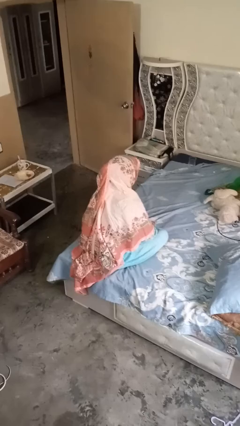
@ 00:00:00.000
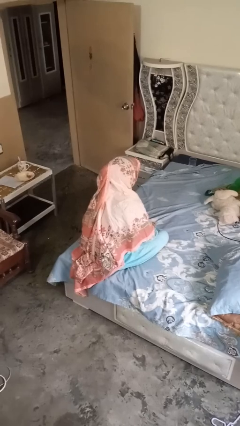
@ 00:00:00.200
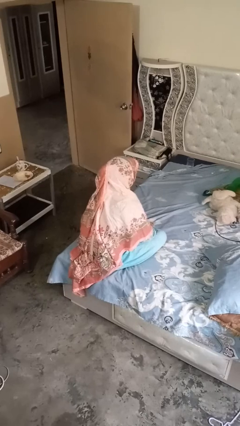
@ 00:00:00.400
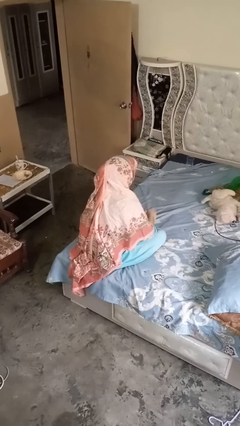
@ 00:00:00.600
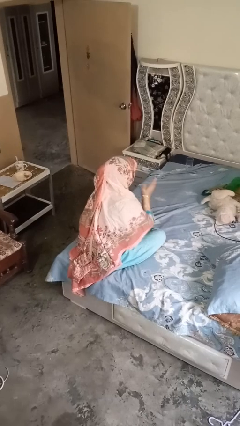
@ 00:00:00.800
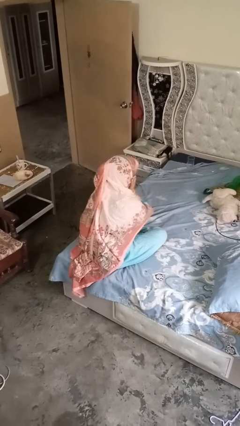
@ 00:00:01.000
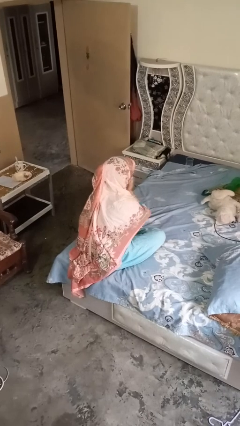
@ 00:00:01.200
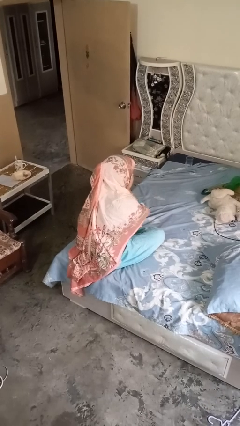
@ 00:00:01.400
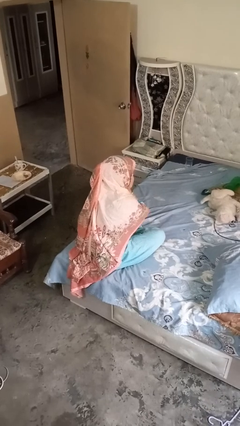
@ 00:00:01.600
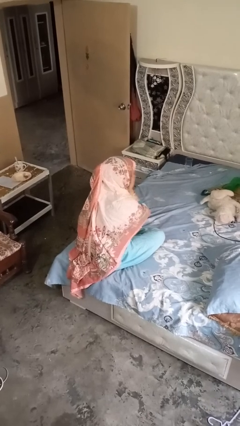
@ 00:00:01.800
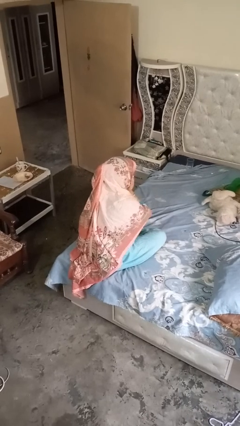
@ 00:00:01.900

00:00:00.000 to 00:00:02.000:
person strokes chin

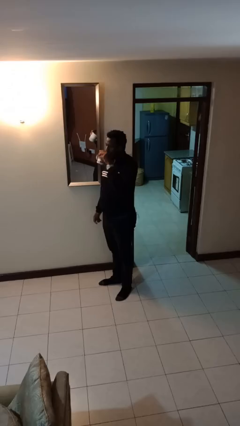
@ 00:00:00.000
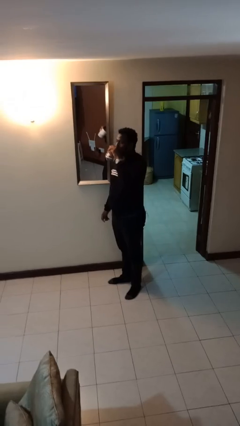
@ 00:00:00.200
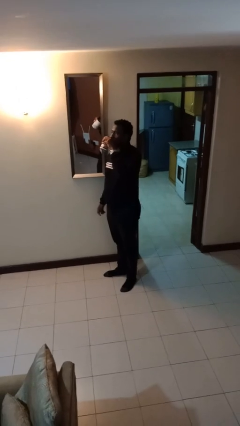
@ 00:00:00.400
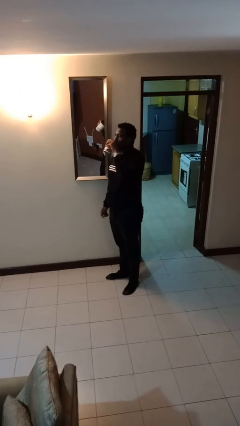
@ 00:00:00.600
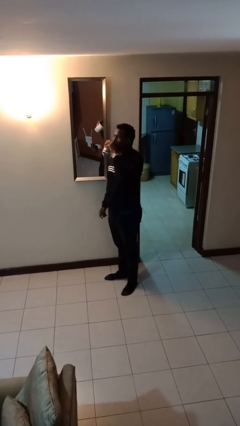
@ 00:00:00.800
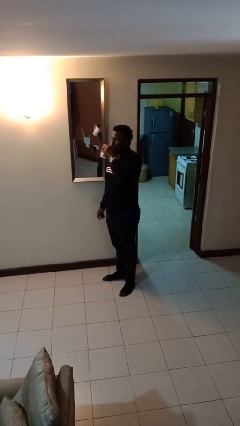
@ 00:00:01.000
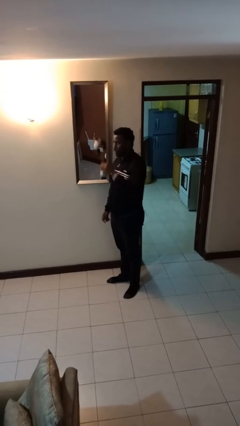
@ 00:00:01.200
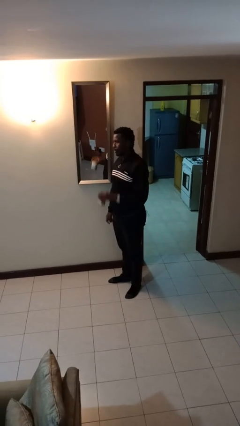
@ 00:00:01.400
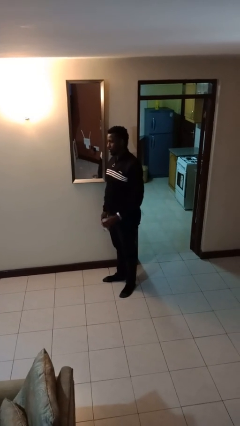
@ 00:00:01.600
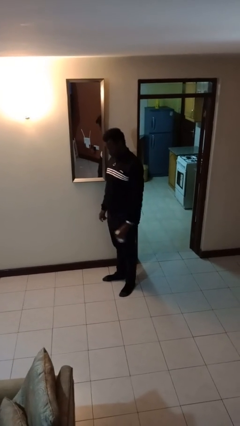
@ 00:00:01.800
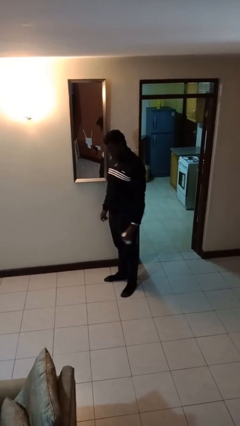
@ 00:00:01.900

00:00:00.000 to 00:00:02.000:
person drinks from beverage can

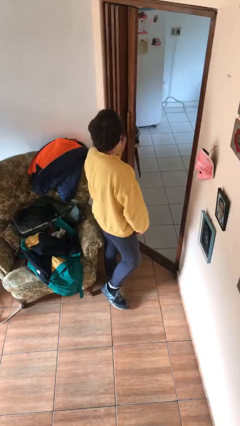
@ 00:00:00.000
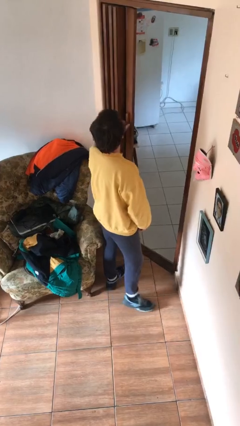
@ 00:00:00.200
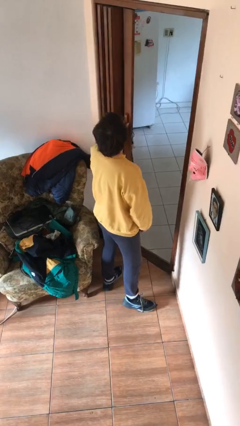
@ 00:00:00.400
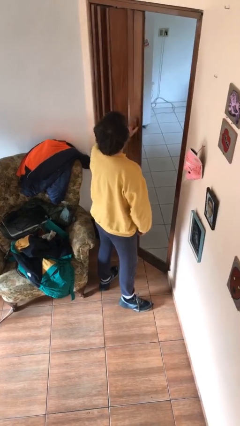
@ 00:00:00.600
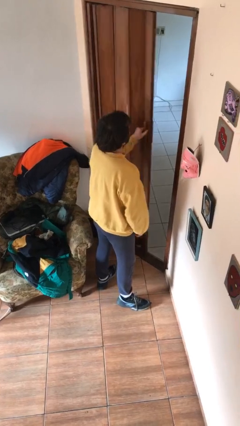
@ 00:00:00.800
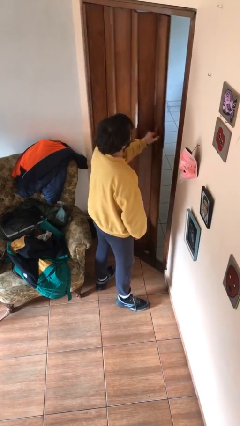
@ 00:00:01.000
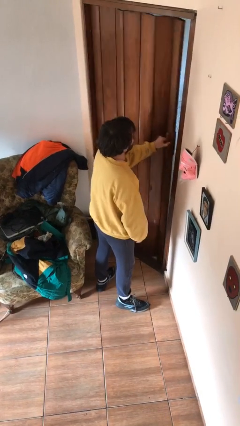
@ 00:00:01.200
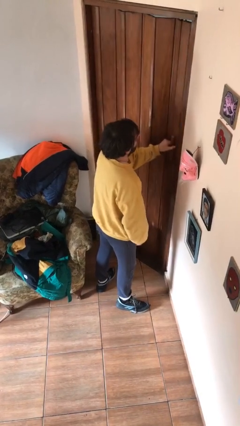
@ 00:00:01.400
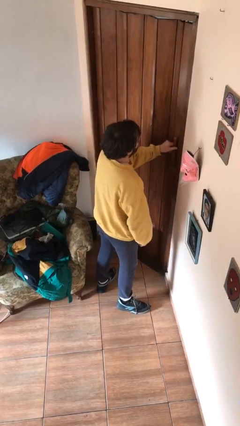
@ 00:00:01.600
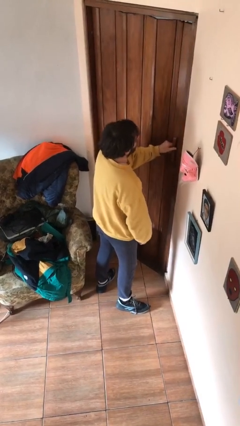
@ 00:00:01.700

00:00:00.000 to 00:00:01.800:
person closes sliding door

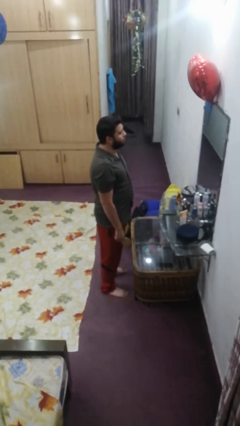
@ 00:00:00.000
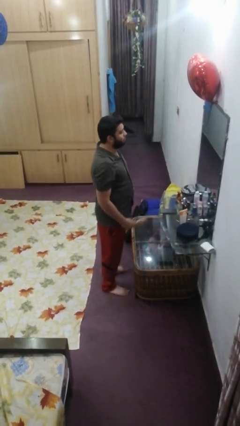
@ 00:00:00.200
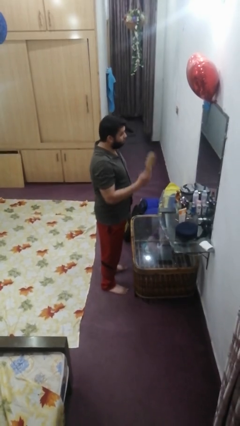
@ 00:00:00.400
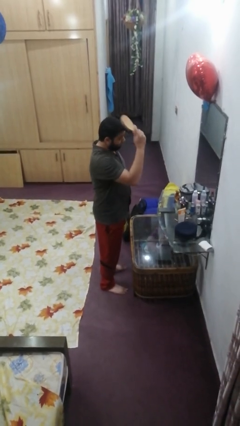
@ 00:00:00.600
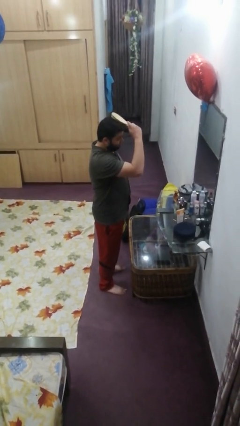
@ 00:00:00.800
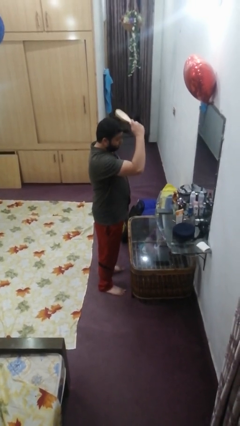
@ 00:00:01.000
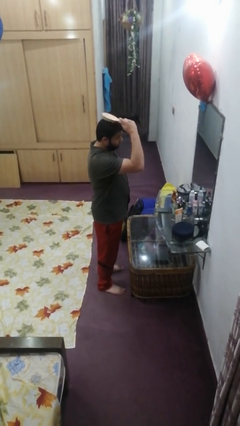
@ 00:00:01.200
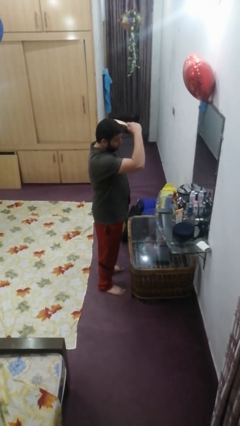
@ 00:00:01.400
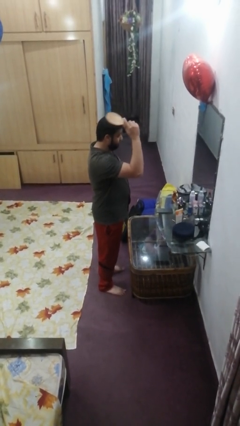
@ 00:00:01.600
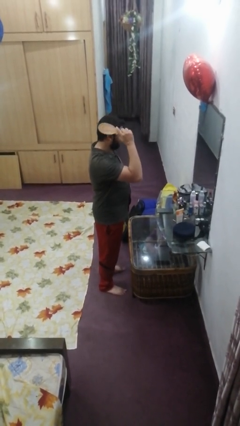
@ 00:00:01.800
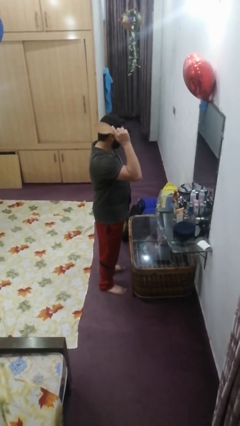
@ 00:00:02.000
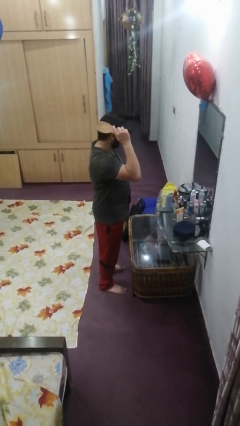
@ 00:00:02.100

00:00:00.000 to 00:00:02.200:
person brushes hair

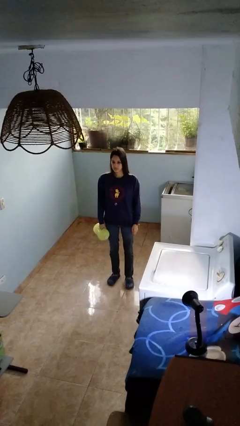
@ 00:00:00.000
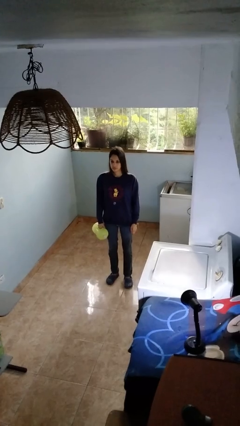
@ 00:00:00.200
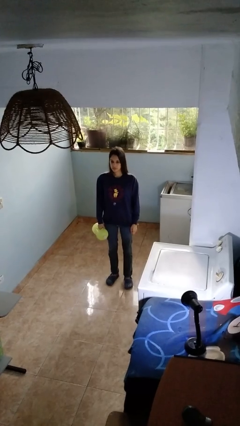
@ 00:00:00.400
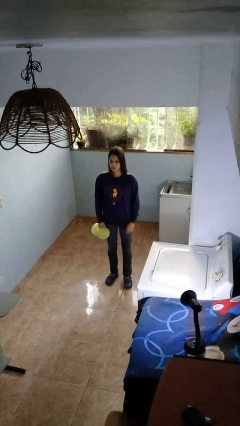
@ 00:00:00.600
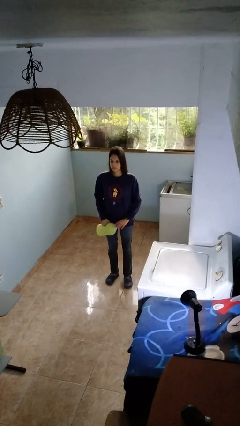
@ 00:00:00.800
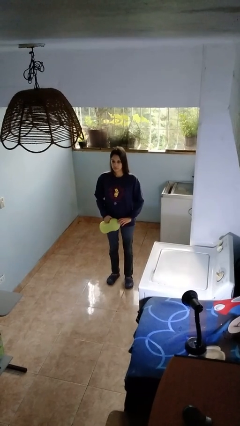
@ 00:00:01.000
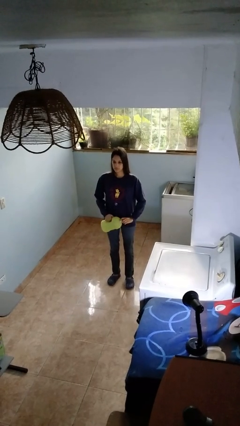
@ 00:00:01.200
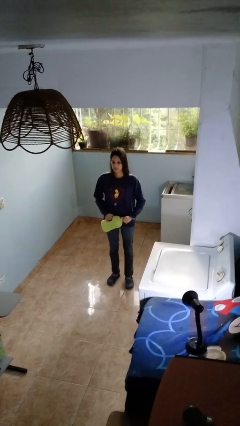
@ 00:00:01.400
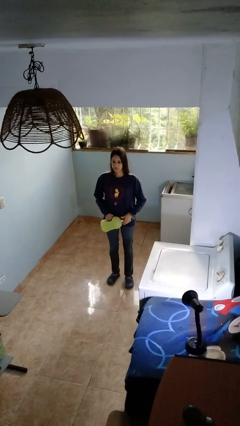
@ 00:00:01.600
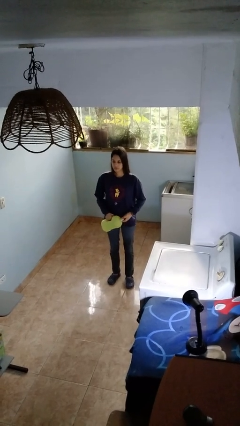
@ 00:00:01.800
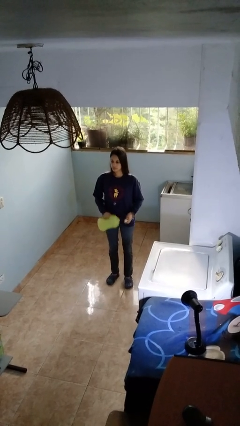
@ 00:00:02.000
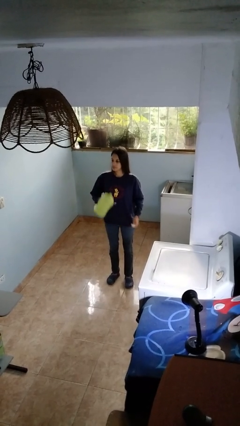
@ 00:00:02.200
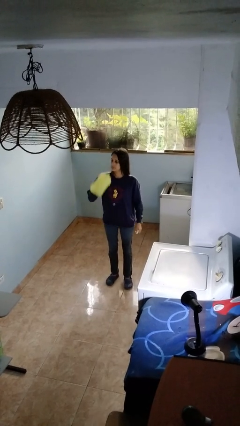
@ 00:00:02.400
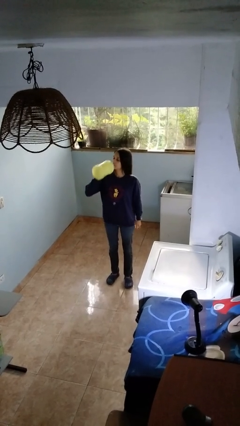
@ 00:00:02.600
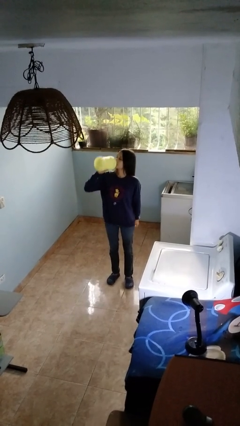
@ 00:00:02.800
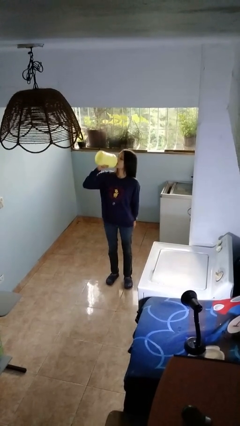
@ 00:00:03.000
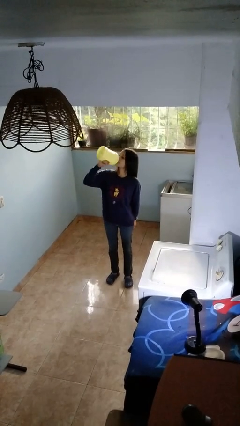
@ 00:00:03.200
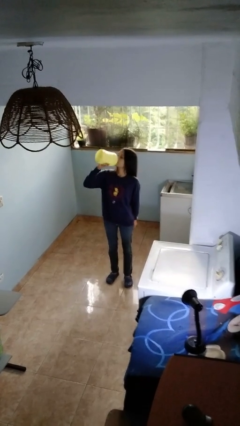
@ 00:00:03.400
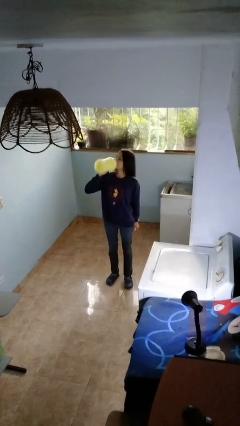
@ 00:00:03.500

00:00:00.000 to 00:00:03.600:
person drinks from bottle

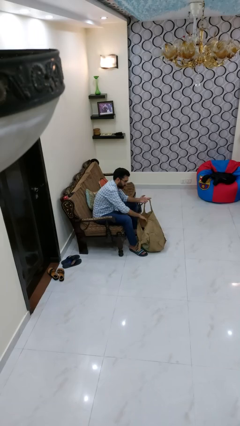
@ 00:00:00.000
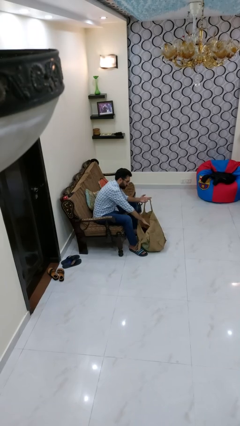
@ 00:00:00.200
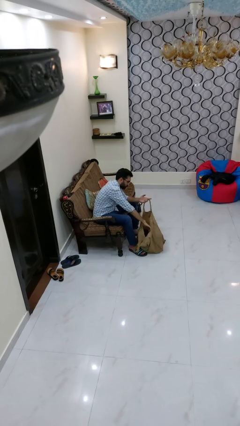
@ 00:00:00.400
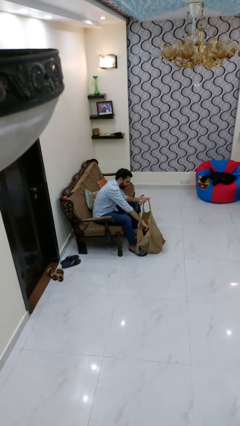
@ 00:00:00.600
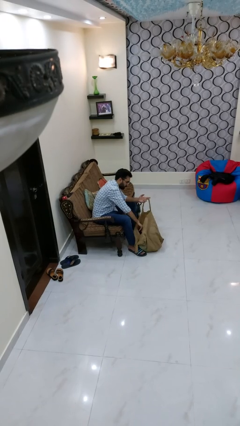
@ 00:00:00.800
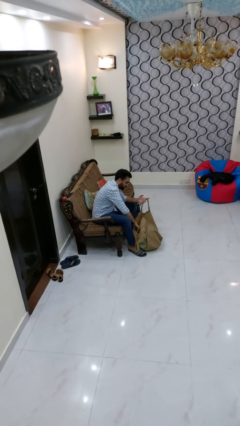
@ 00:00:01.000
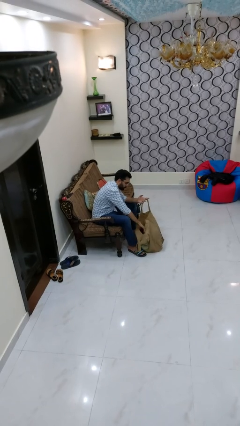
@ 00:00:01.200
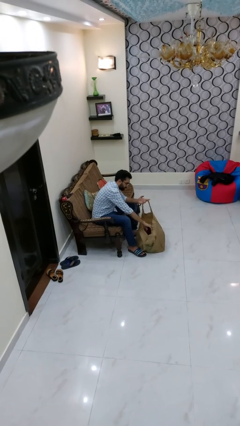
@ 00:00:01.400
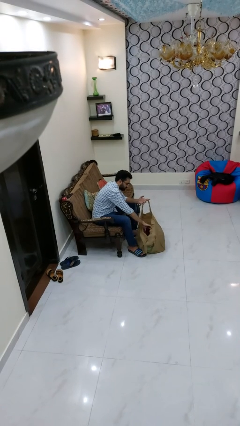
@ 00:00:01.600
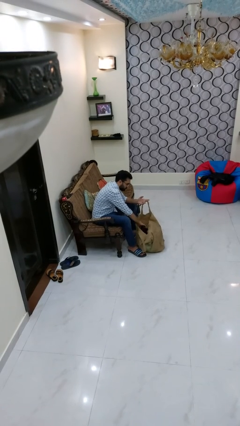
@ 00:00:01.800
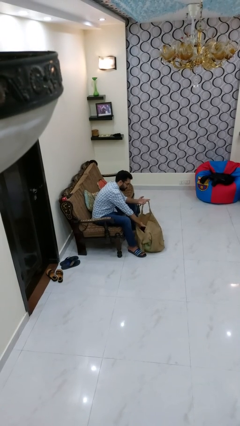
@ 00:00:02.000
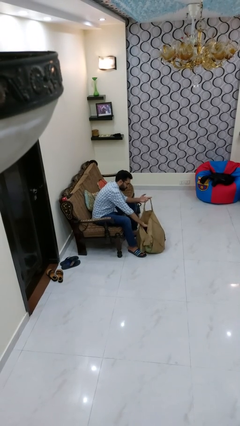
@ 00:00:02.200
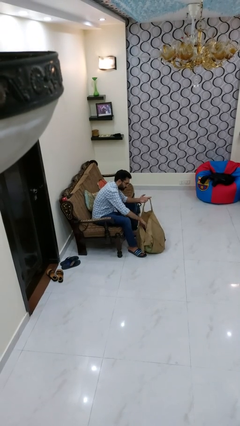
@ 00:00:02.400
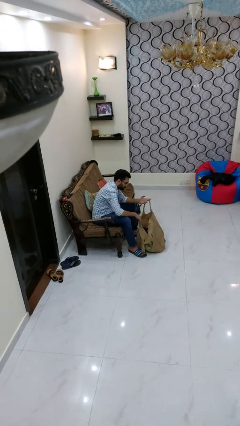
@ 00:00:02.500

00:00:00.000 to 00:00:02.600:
person searches in bag

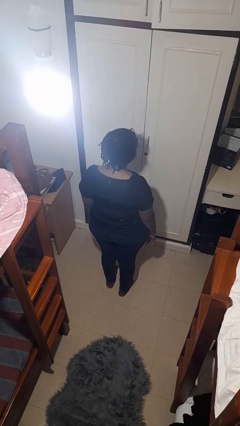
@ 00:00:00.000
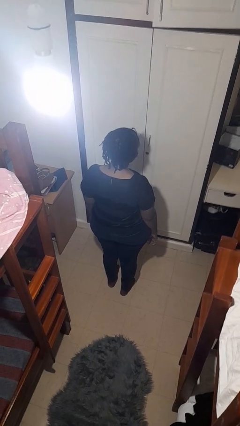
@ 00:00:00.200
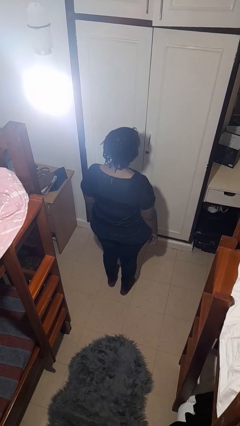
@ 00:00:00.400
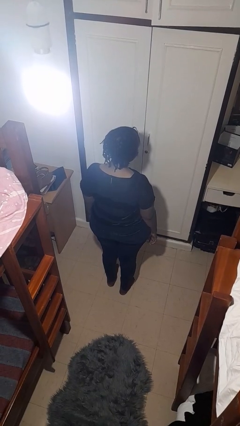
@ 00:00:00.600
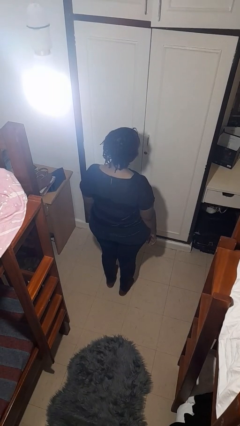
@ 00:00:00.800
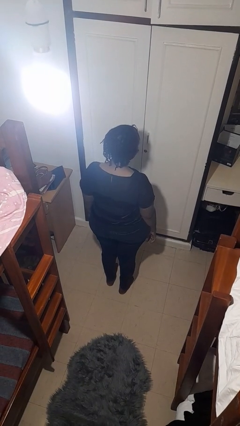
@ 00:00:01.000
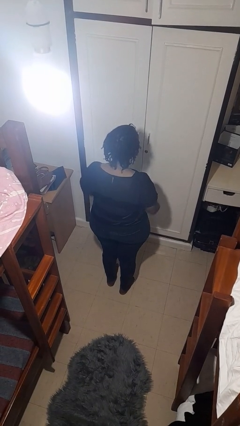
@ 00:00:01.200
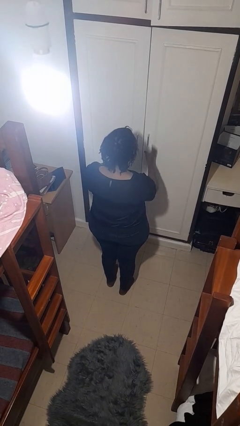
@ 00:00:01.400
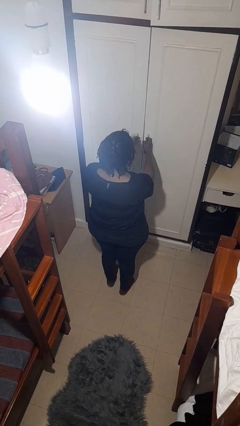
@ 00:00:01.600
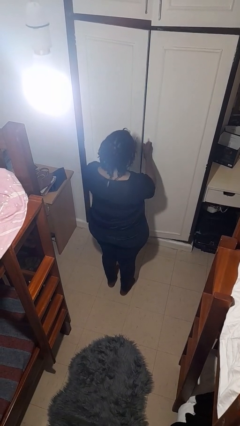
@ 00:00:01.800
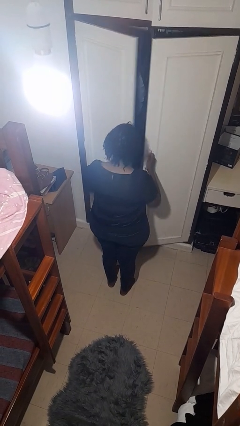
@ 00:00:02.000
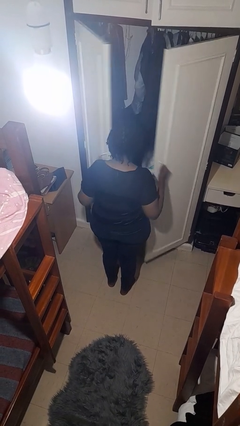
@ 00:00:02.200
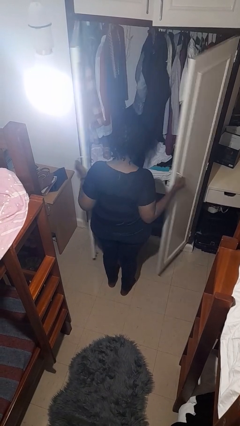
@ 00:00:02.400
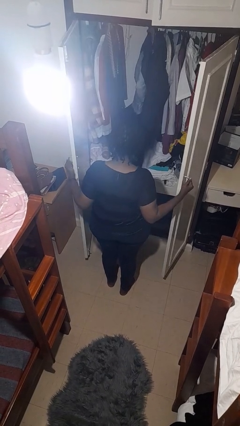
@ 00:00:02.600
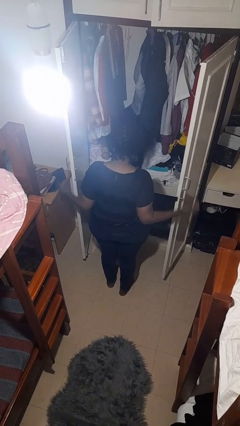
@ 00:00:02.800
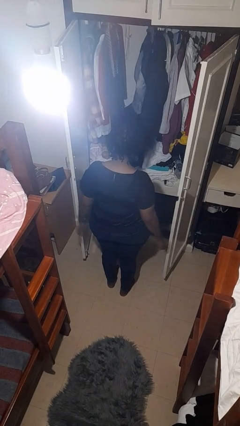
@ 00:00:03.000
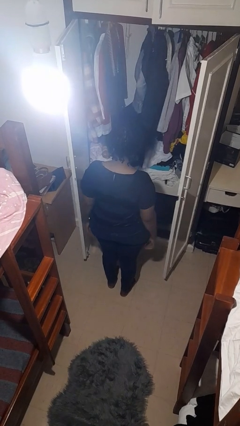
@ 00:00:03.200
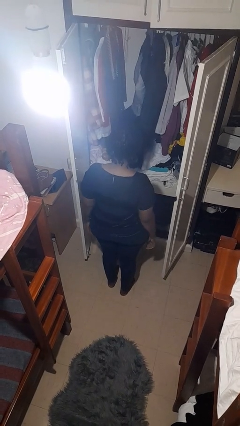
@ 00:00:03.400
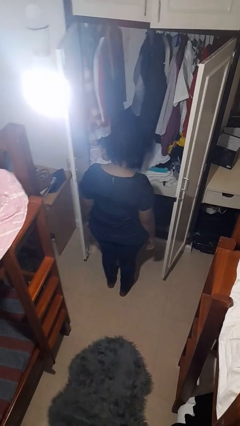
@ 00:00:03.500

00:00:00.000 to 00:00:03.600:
person opens closet door
